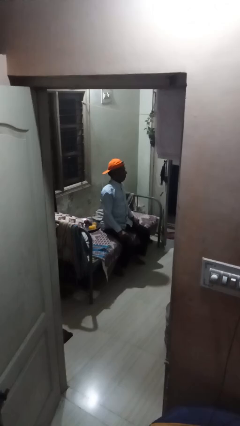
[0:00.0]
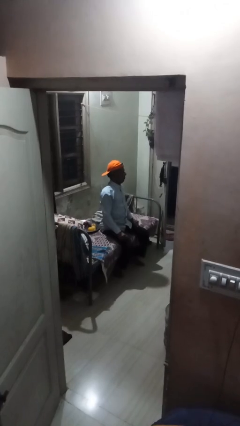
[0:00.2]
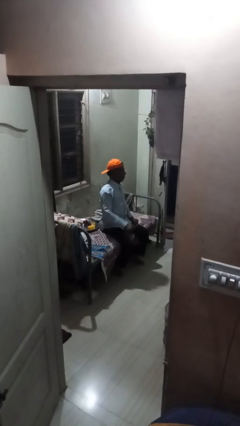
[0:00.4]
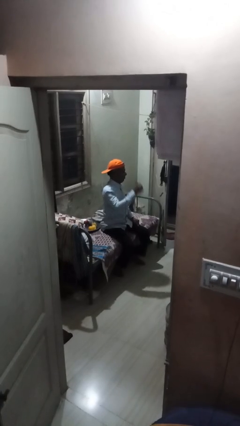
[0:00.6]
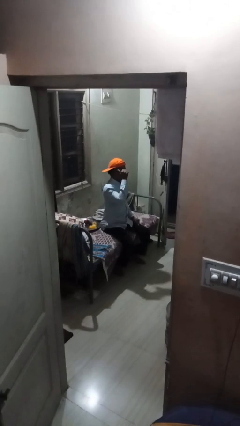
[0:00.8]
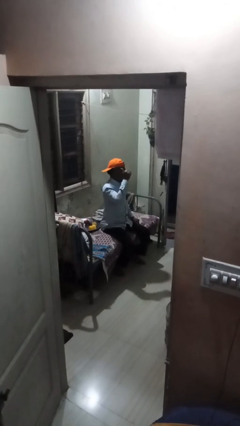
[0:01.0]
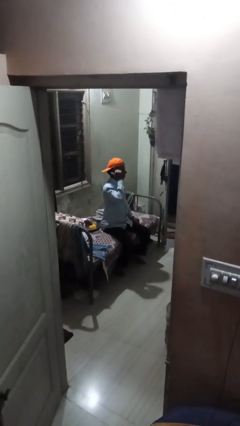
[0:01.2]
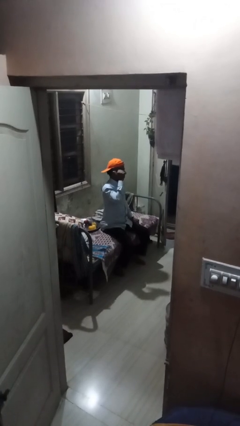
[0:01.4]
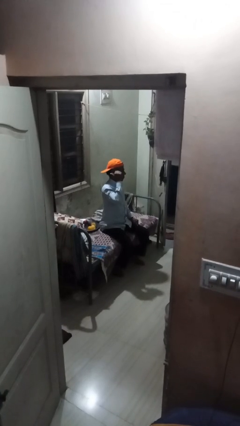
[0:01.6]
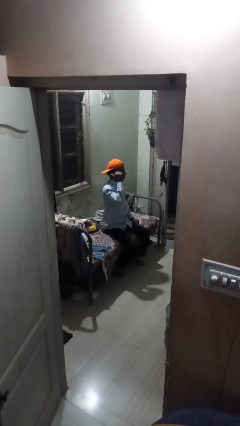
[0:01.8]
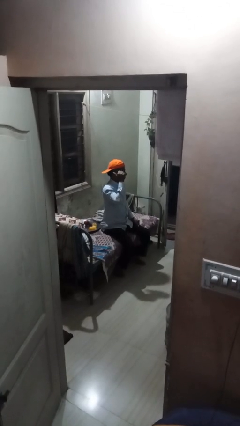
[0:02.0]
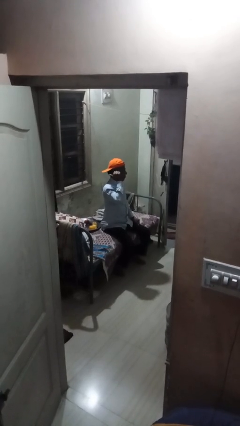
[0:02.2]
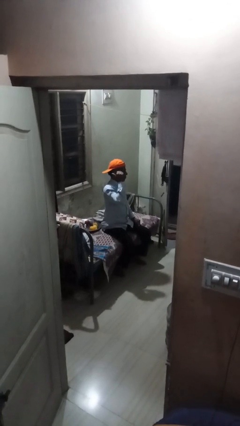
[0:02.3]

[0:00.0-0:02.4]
person gestures behind me

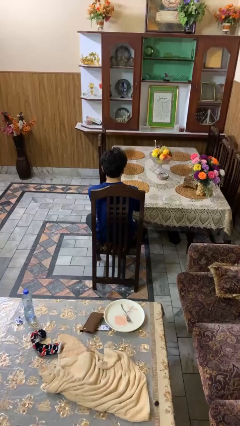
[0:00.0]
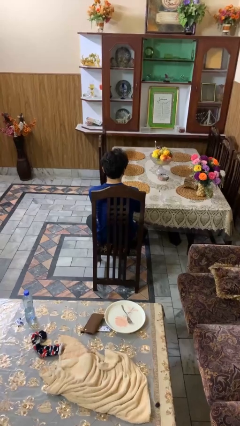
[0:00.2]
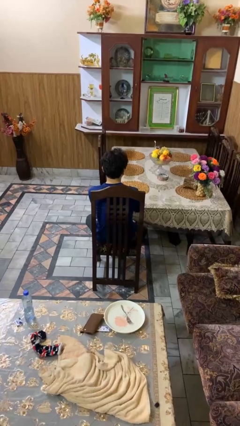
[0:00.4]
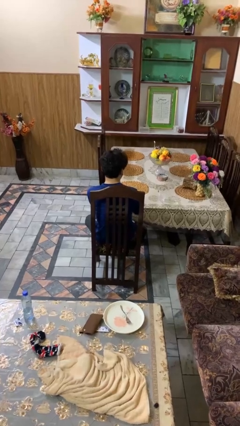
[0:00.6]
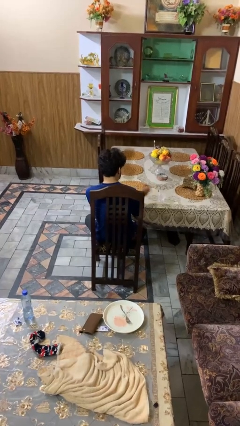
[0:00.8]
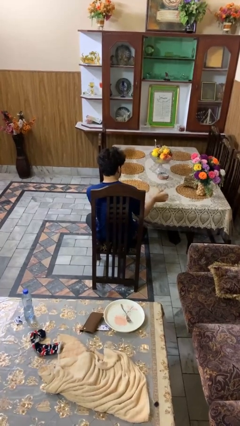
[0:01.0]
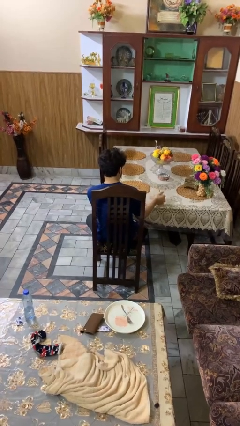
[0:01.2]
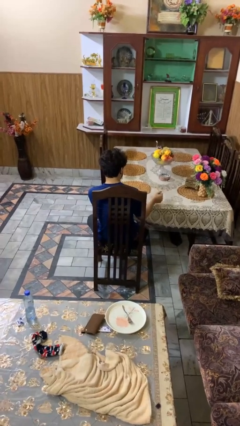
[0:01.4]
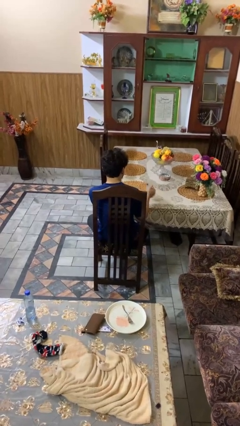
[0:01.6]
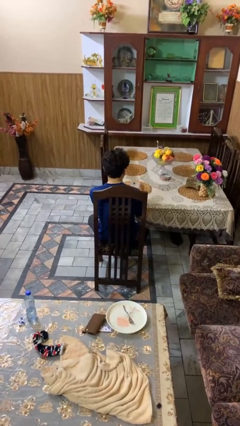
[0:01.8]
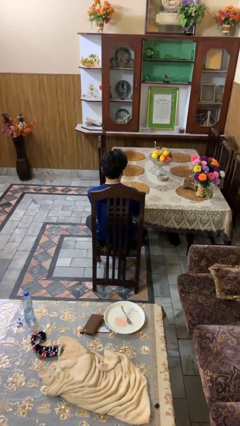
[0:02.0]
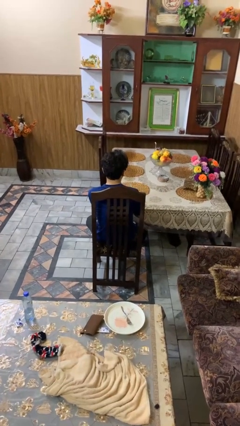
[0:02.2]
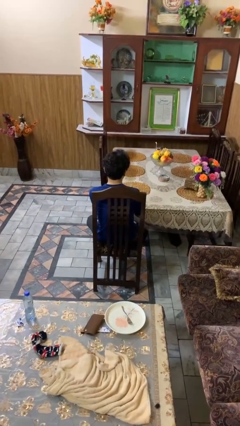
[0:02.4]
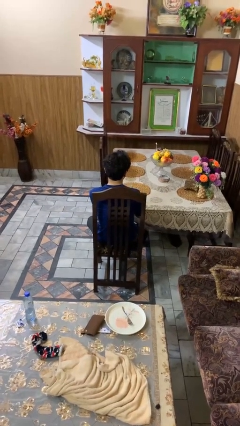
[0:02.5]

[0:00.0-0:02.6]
person picks up object from table

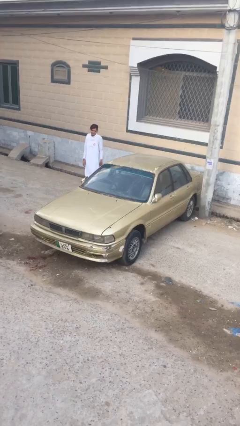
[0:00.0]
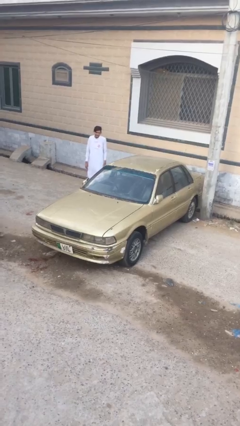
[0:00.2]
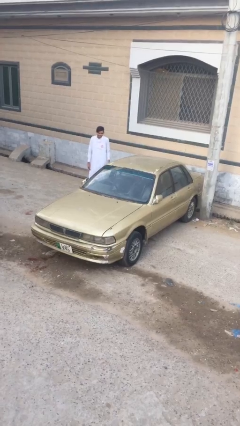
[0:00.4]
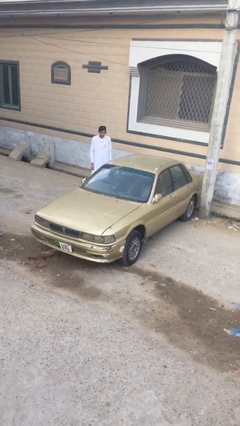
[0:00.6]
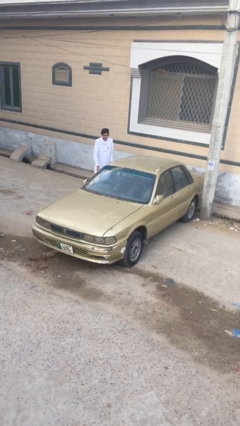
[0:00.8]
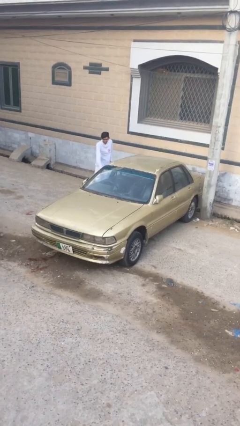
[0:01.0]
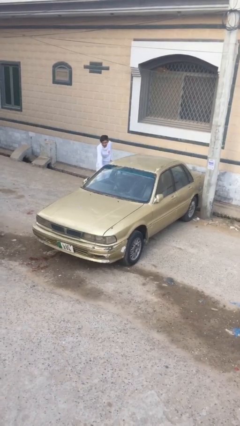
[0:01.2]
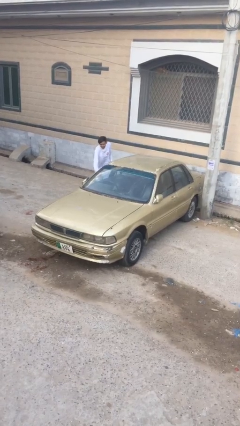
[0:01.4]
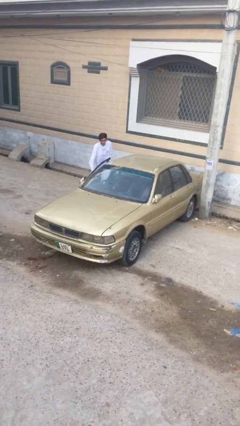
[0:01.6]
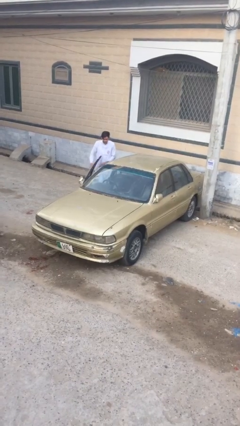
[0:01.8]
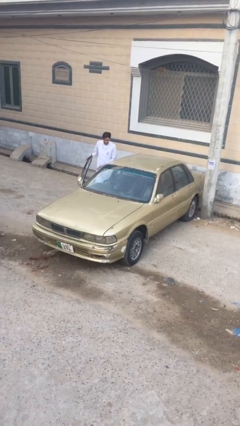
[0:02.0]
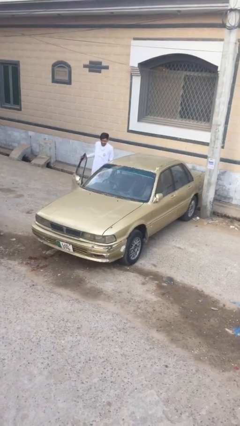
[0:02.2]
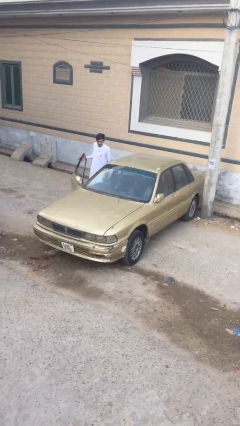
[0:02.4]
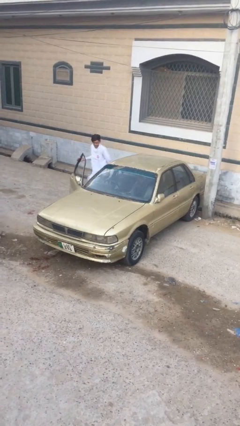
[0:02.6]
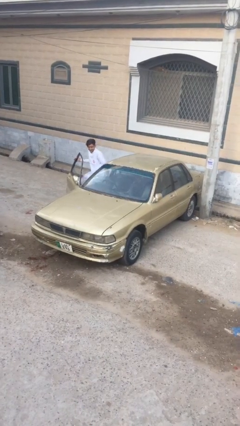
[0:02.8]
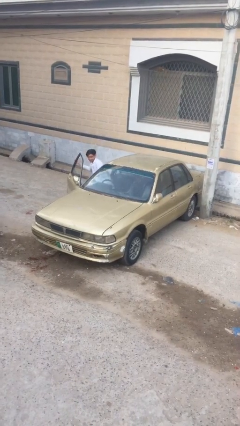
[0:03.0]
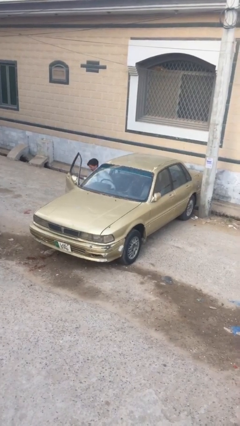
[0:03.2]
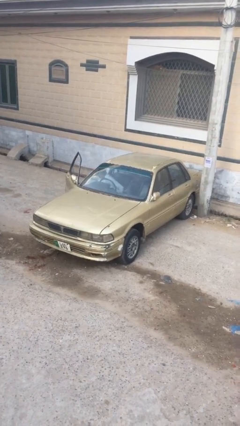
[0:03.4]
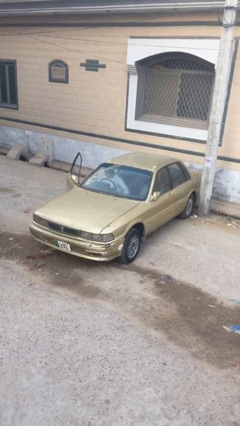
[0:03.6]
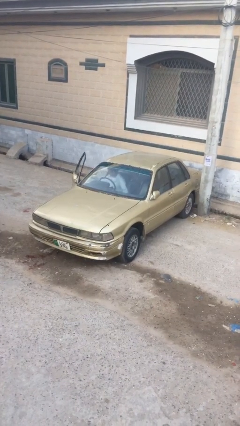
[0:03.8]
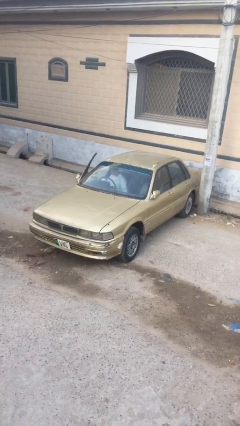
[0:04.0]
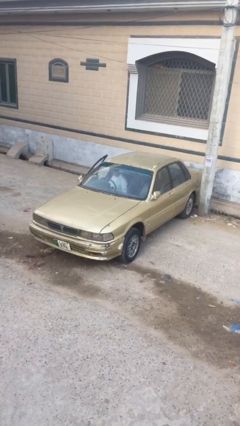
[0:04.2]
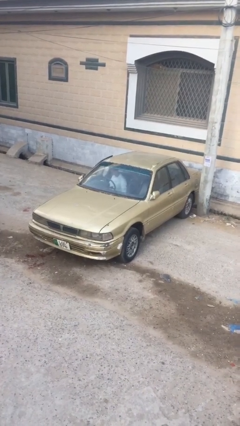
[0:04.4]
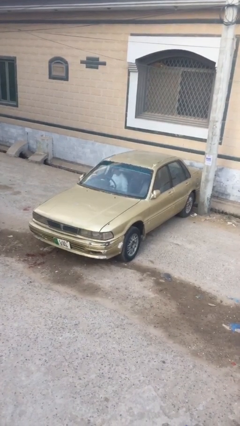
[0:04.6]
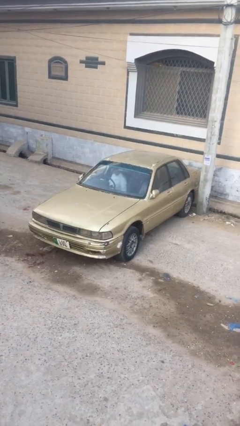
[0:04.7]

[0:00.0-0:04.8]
car picks up person

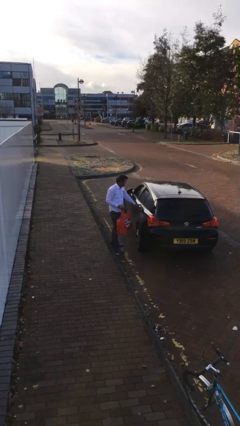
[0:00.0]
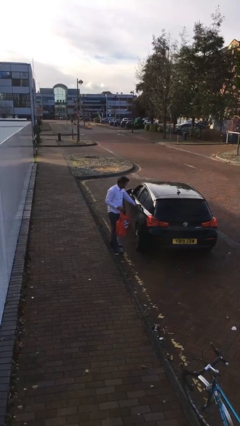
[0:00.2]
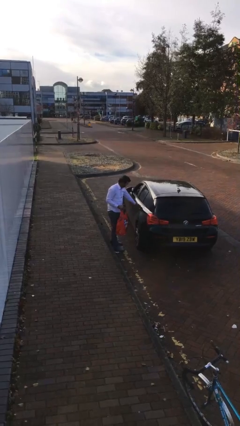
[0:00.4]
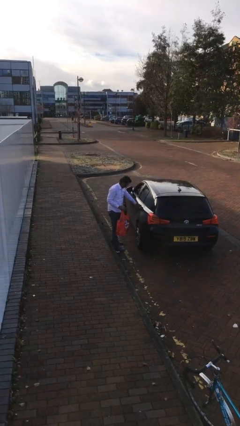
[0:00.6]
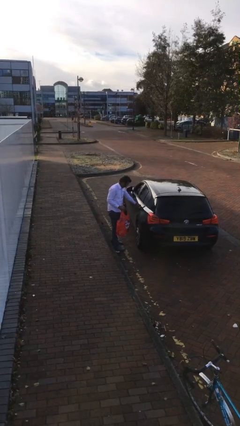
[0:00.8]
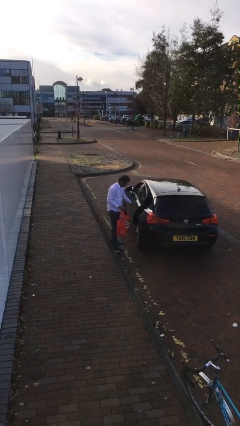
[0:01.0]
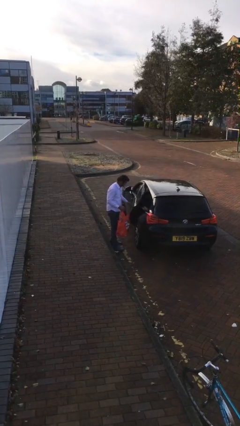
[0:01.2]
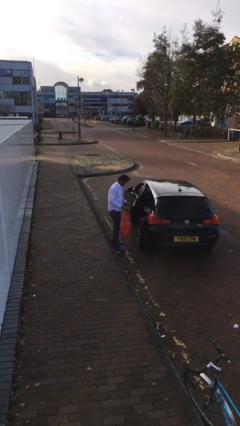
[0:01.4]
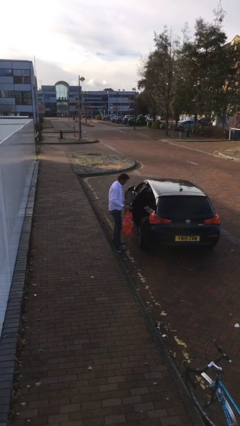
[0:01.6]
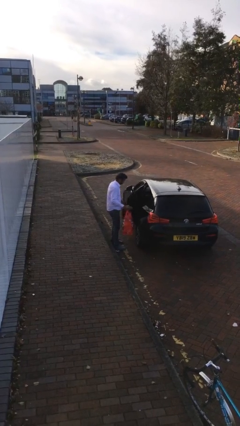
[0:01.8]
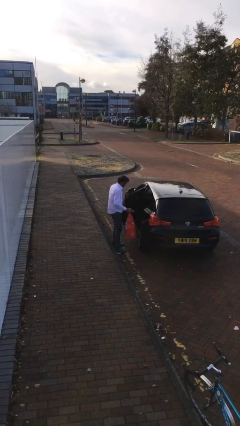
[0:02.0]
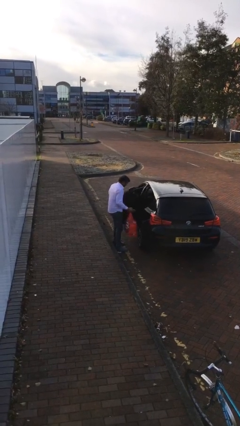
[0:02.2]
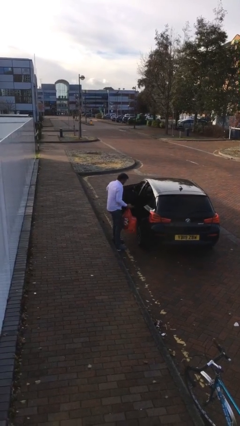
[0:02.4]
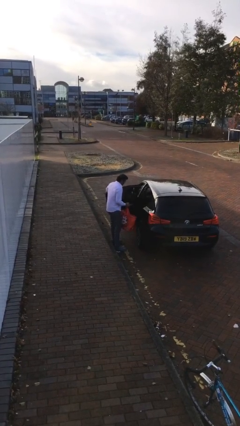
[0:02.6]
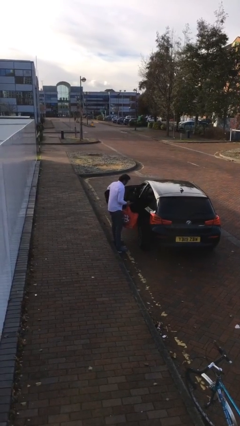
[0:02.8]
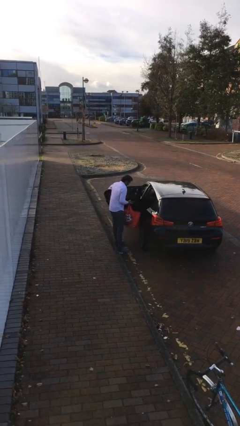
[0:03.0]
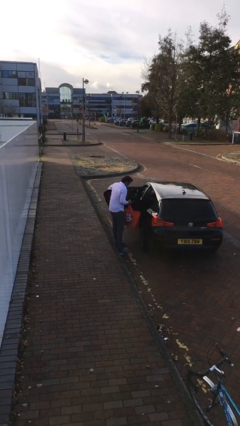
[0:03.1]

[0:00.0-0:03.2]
person opens car door

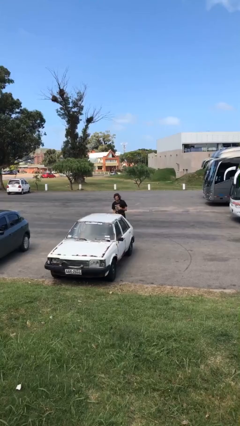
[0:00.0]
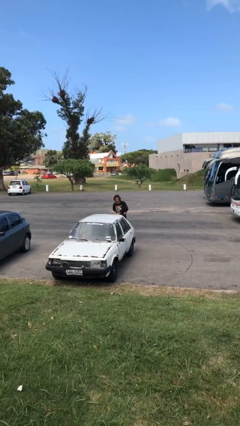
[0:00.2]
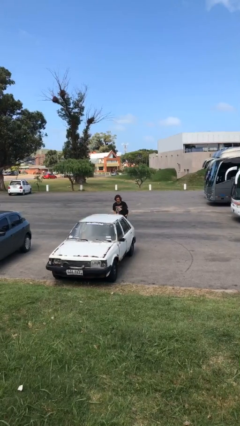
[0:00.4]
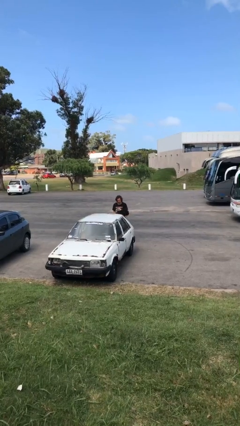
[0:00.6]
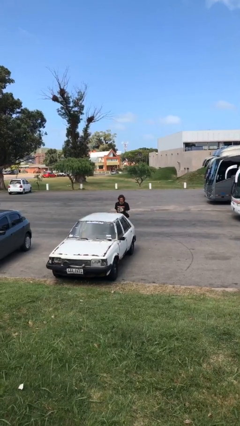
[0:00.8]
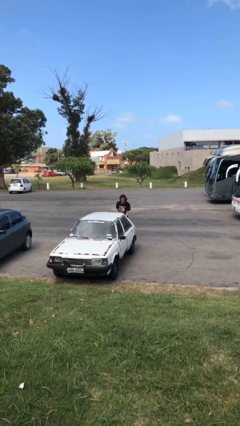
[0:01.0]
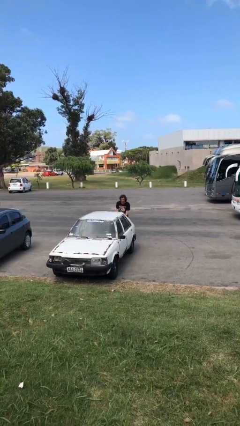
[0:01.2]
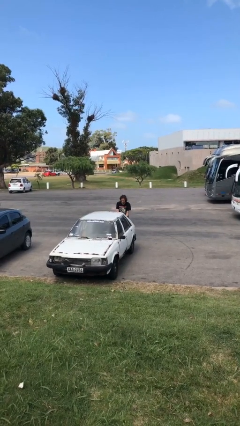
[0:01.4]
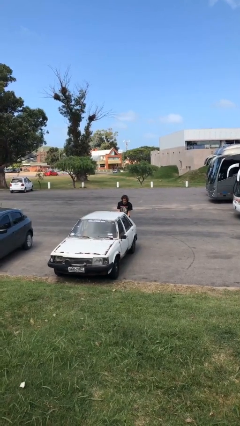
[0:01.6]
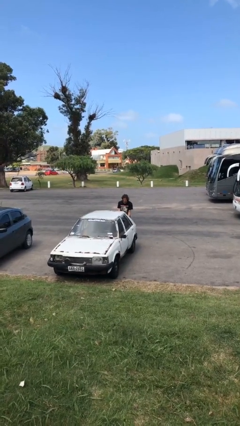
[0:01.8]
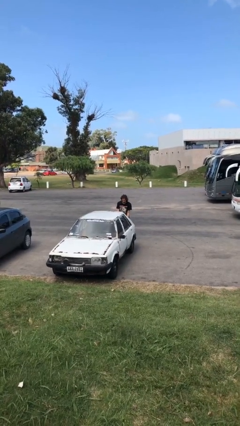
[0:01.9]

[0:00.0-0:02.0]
person loads car

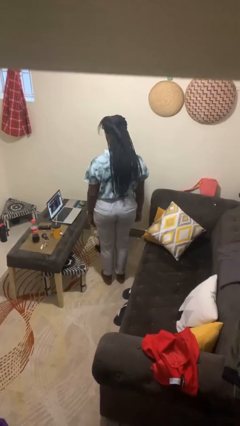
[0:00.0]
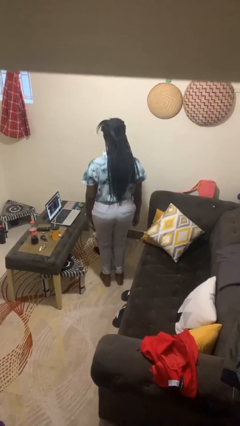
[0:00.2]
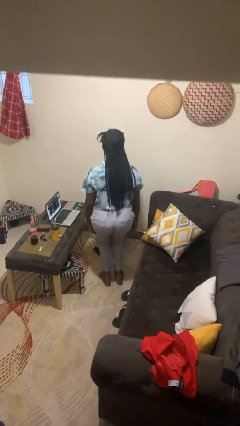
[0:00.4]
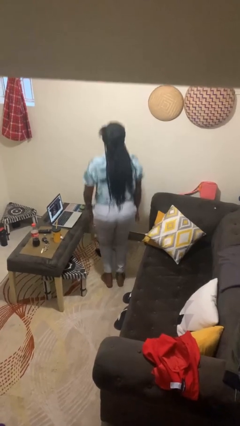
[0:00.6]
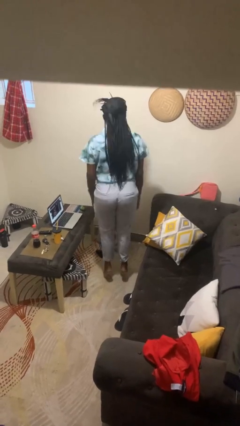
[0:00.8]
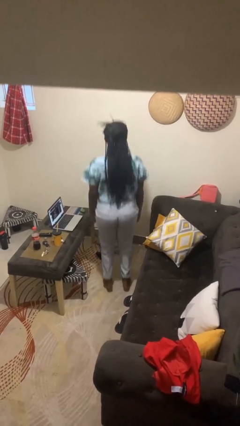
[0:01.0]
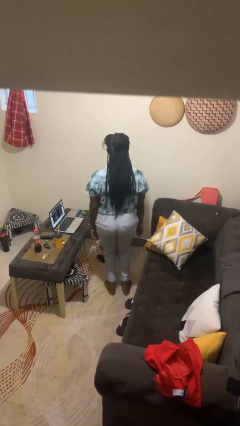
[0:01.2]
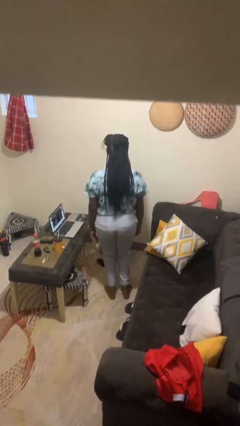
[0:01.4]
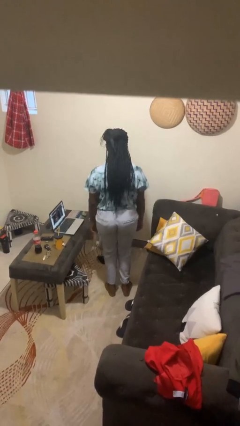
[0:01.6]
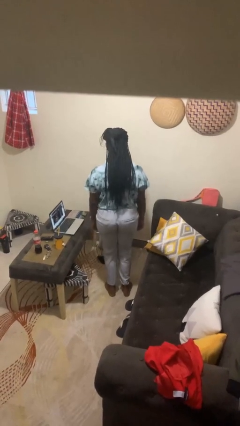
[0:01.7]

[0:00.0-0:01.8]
person jumps

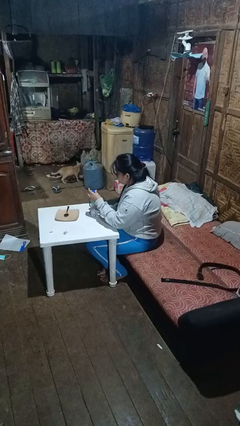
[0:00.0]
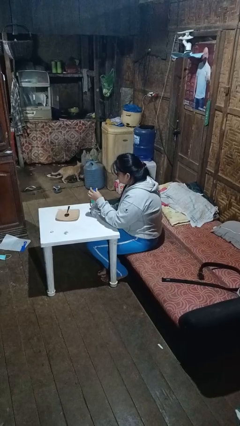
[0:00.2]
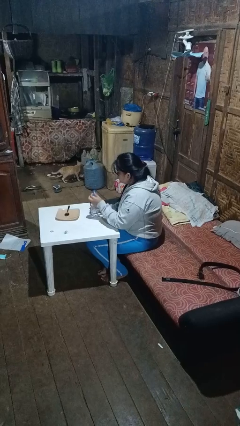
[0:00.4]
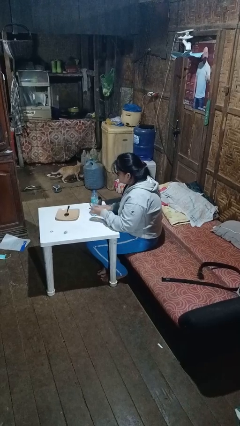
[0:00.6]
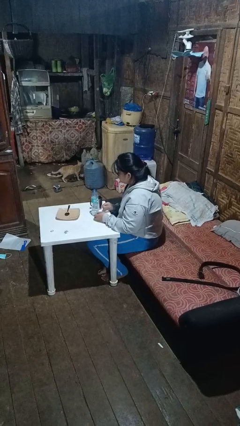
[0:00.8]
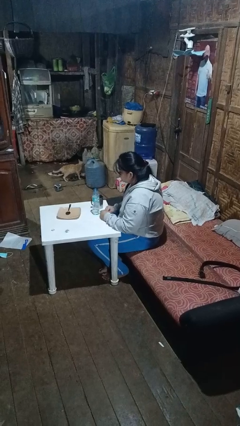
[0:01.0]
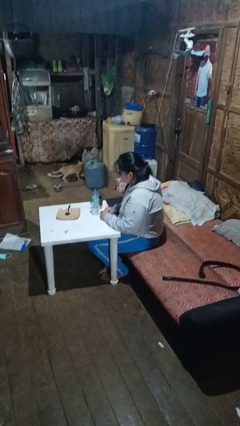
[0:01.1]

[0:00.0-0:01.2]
person unscrews lid from bottle
